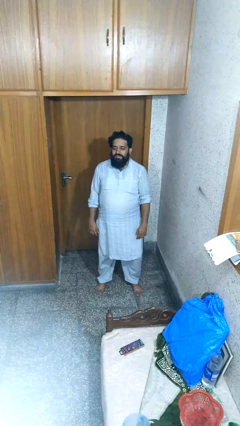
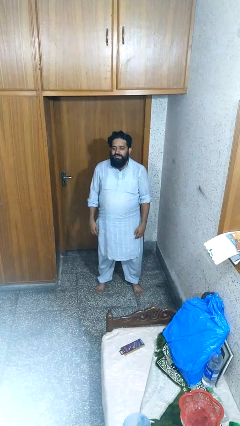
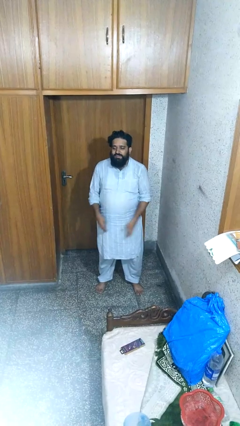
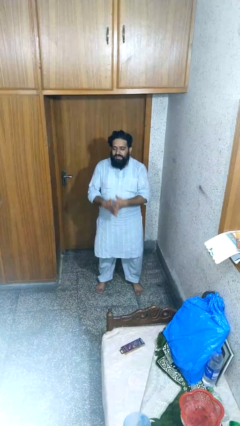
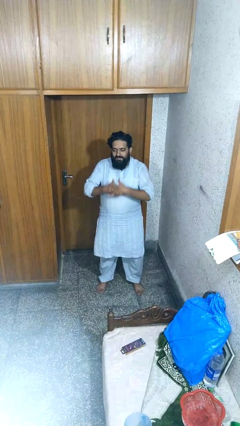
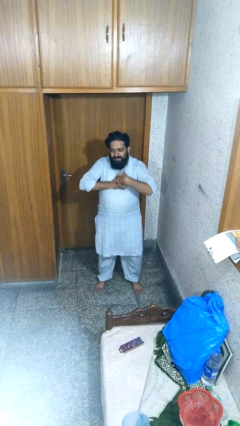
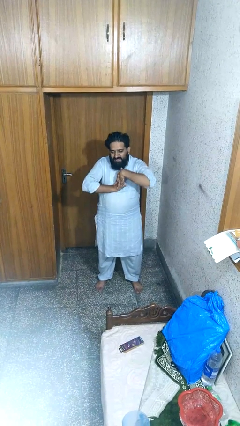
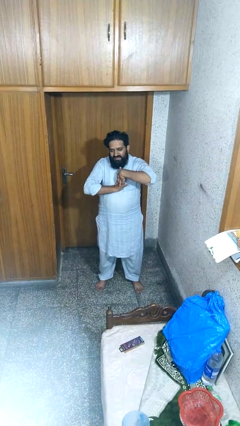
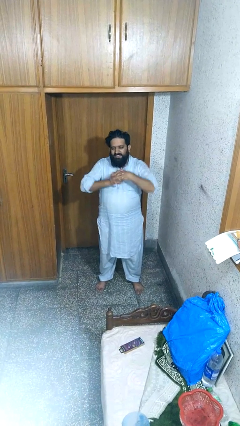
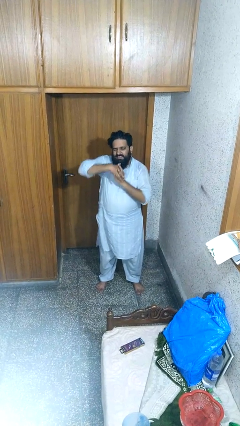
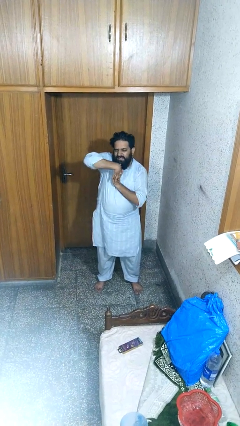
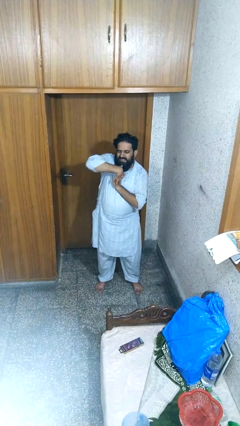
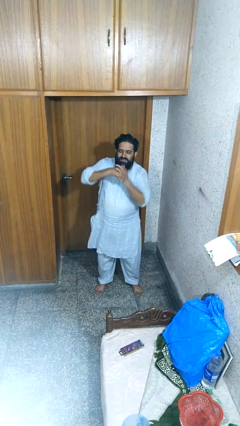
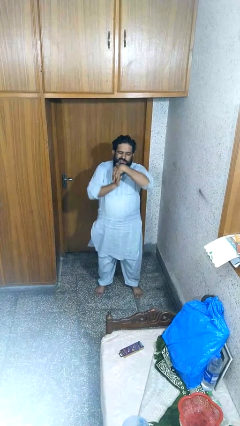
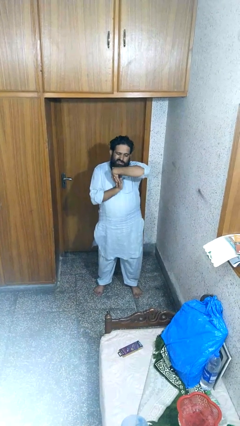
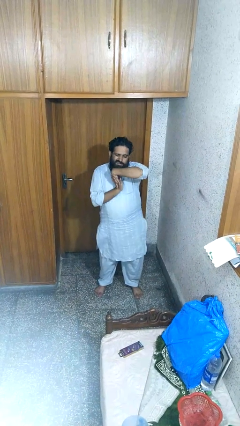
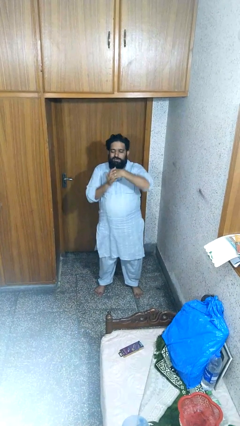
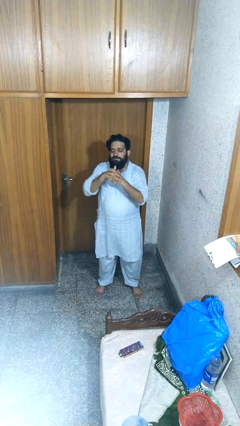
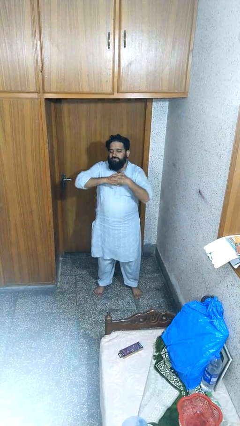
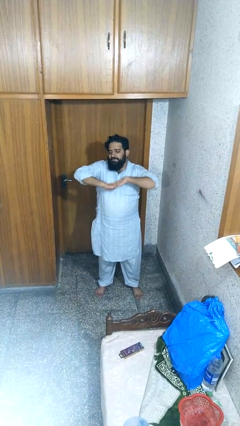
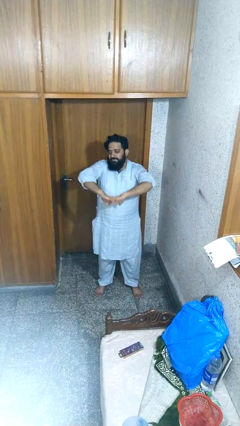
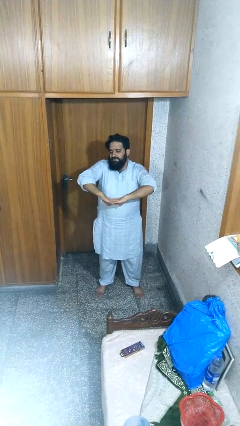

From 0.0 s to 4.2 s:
person cracks knuckles

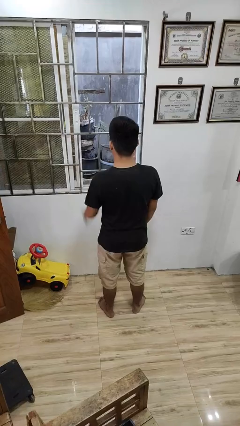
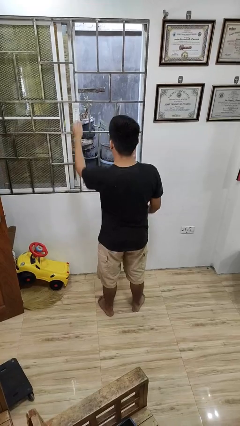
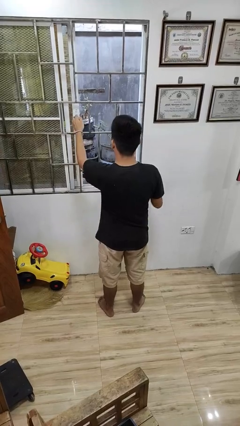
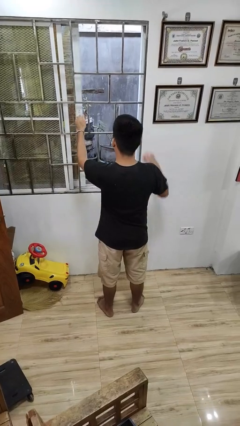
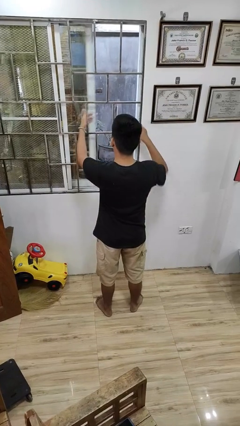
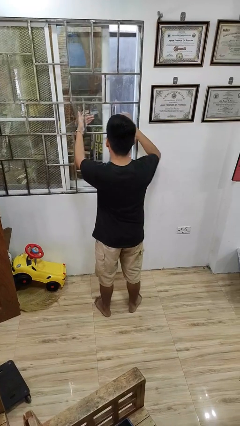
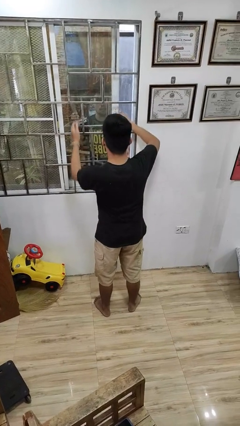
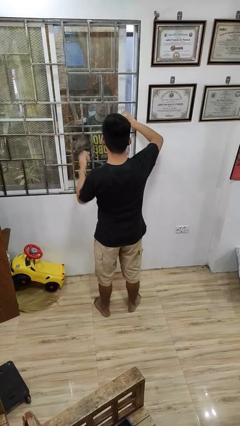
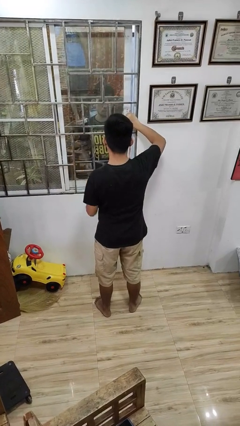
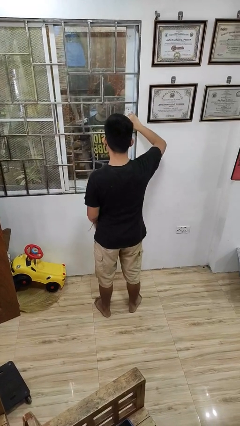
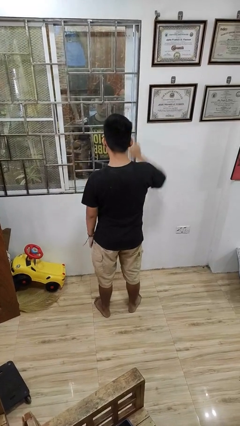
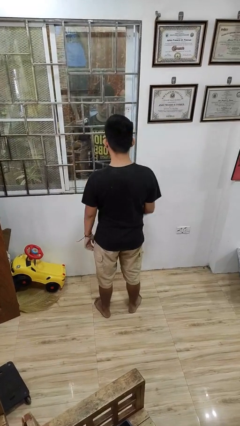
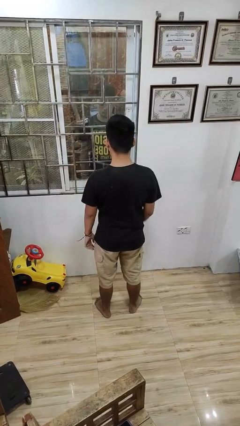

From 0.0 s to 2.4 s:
person closes home window

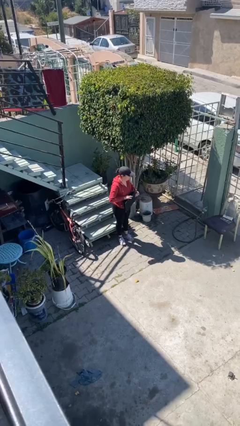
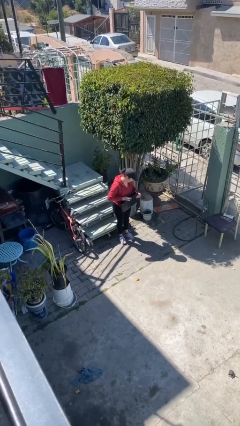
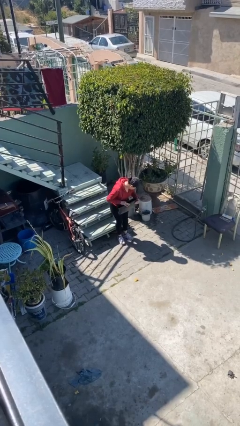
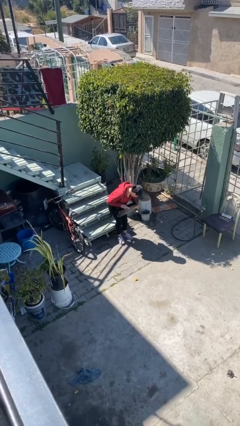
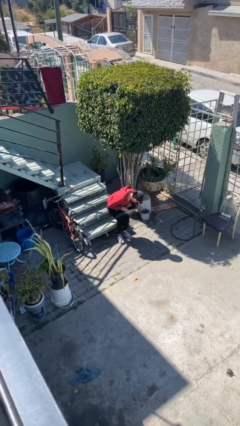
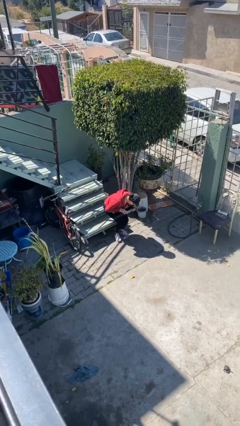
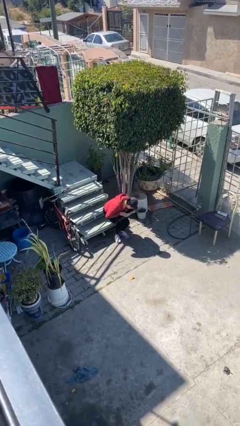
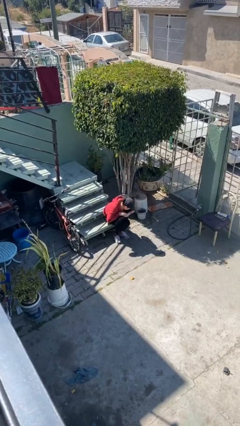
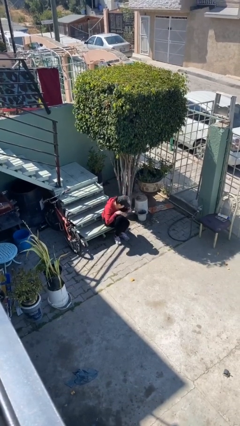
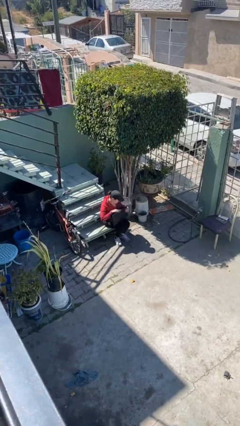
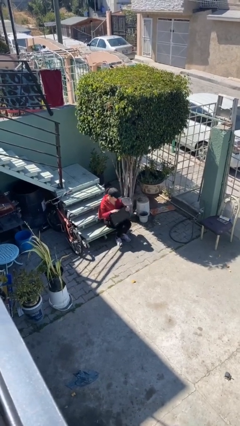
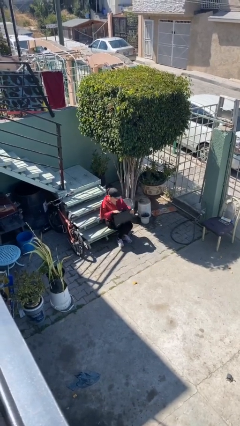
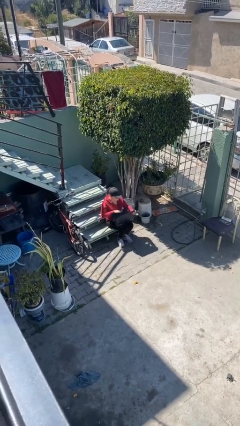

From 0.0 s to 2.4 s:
person sits down

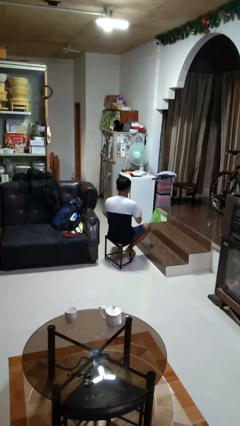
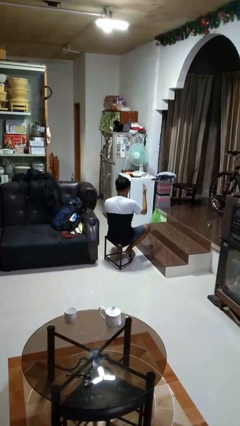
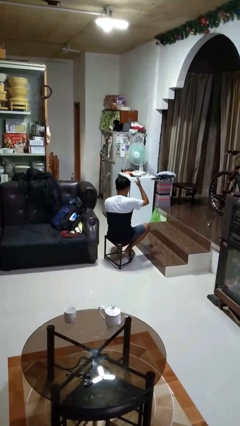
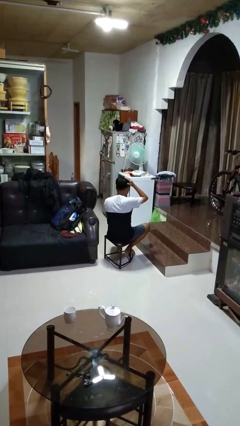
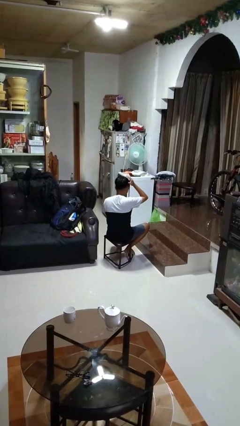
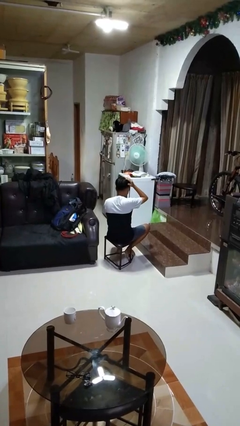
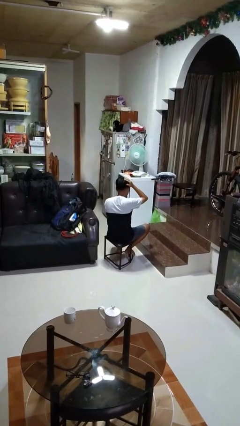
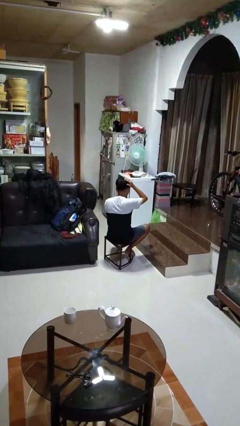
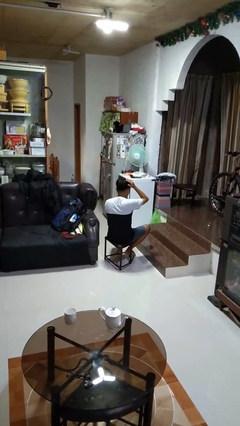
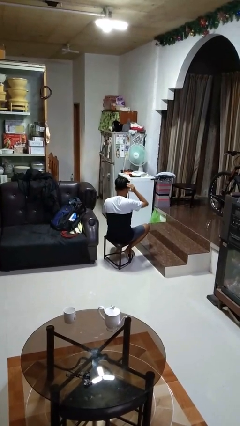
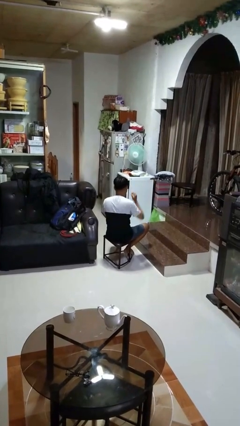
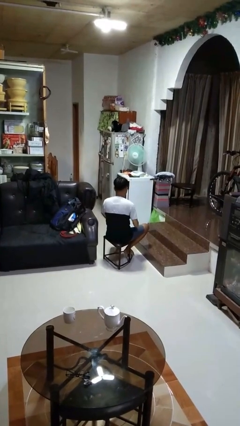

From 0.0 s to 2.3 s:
person pats head

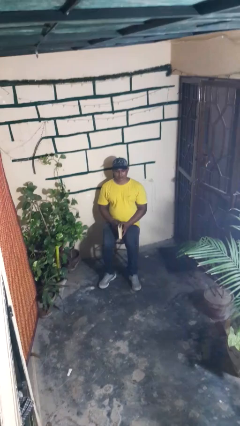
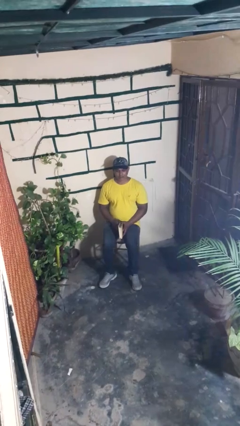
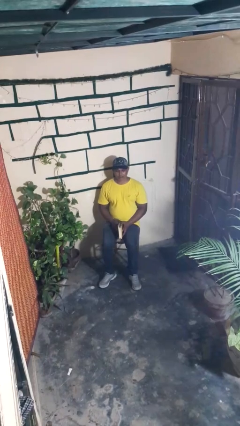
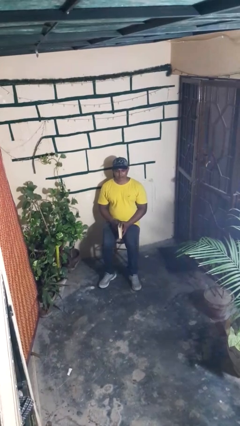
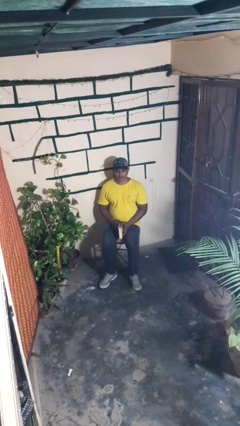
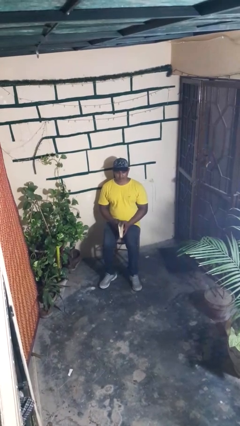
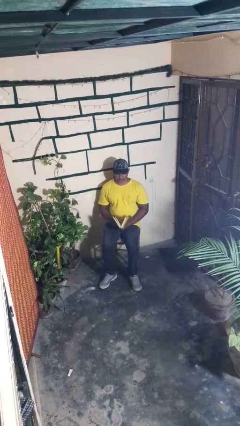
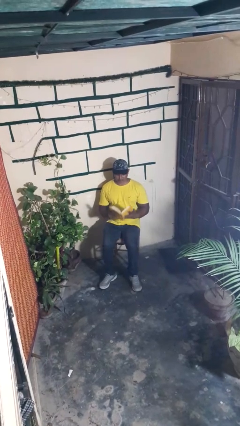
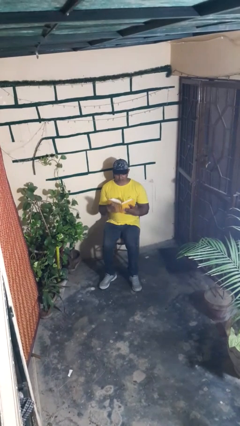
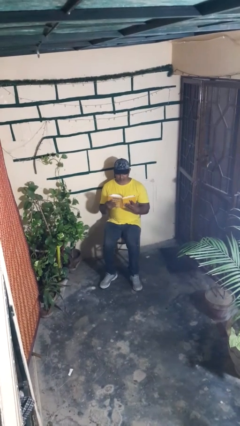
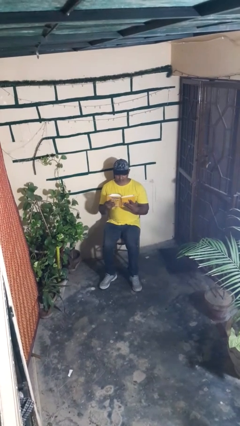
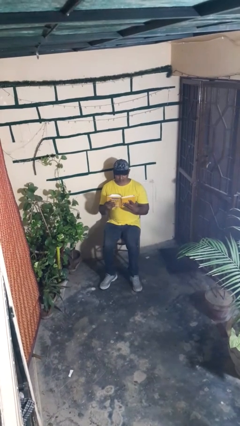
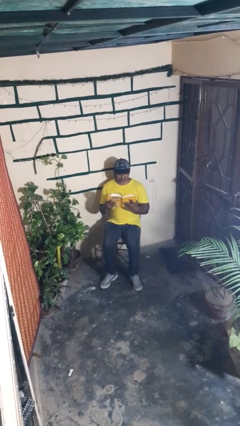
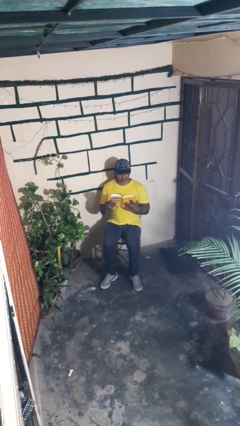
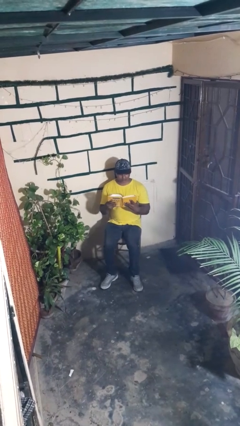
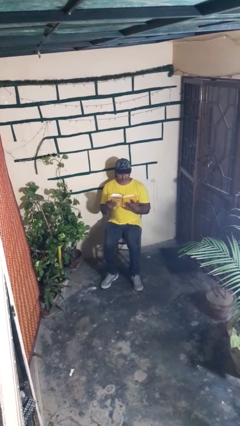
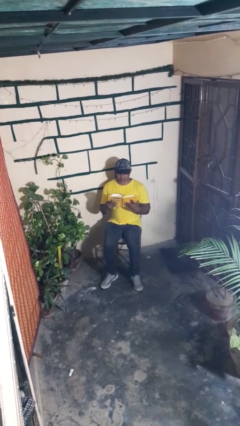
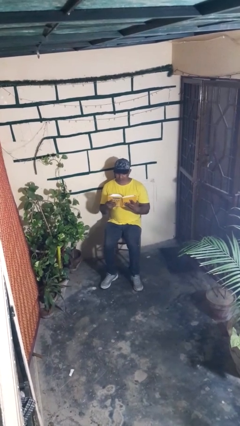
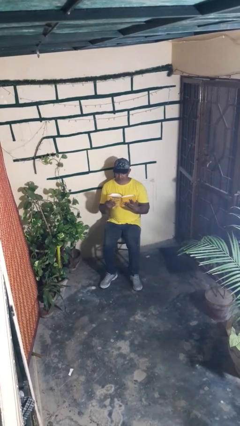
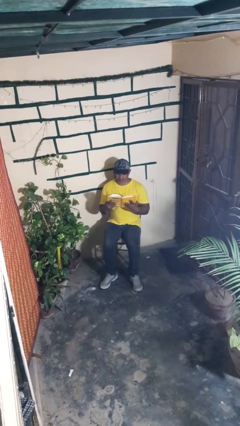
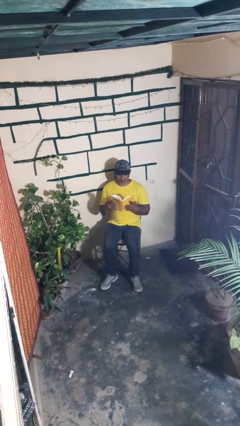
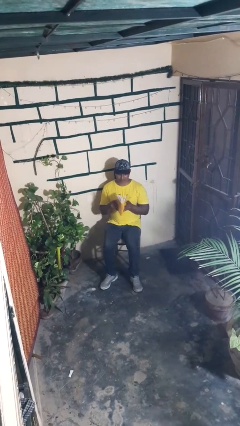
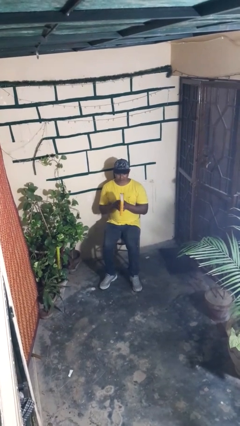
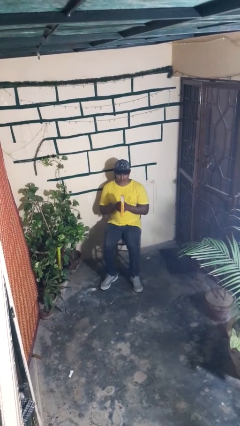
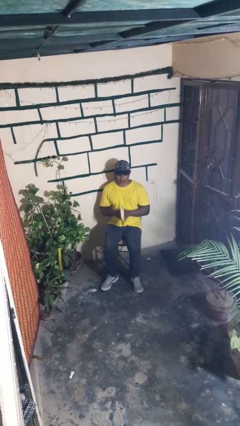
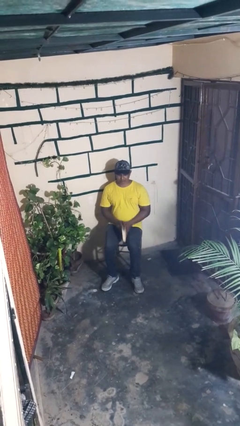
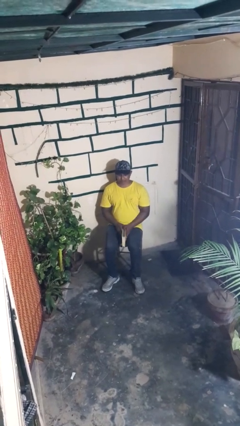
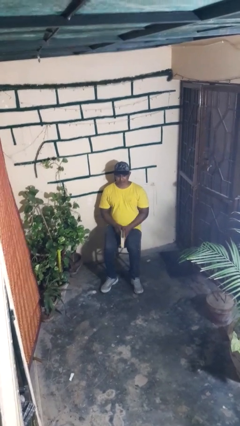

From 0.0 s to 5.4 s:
person reads book

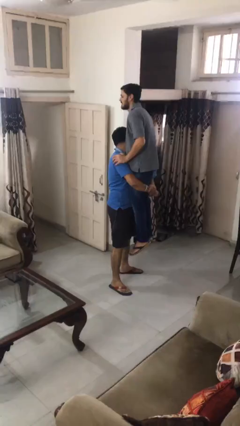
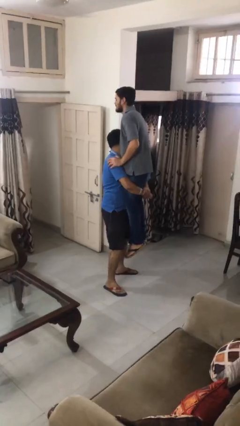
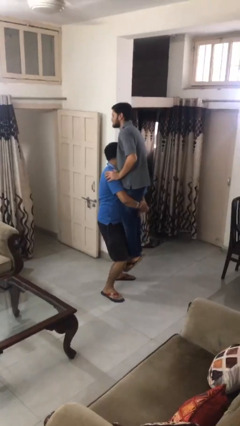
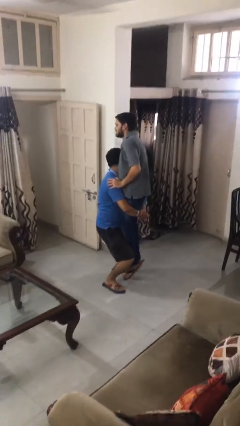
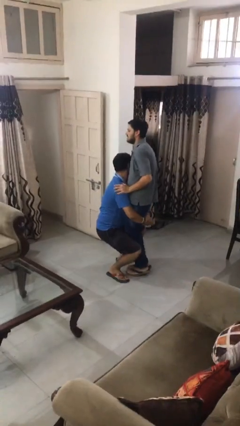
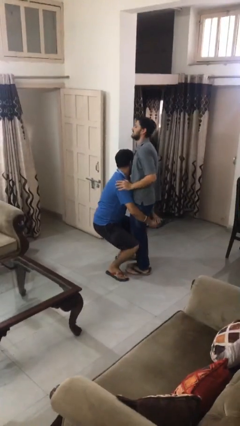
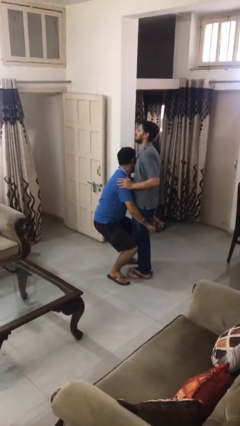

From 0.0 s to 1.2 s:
person puts down person
